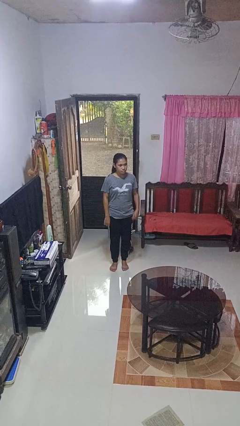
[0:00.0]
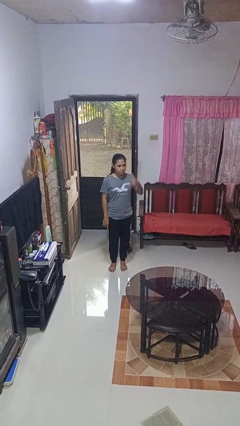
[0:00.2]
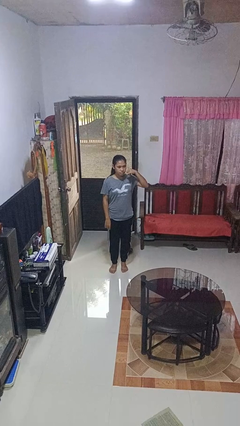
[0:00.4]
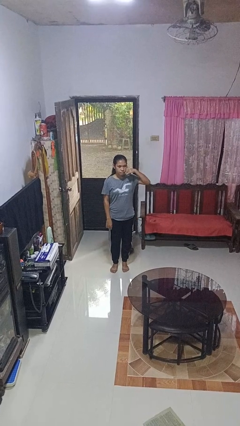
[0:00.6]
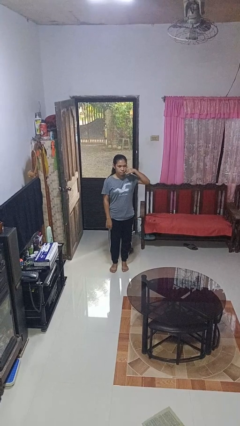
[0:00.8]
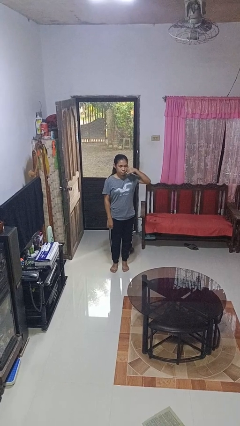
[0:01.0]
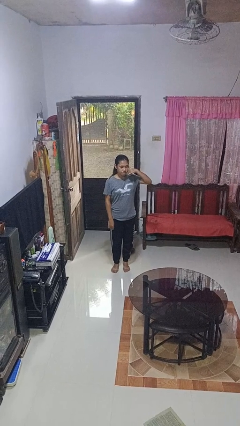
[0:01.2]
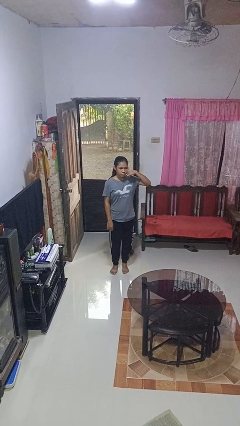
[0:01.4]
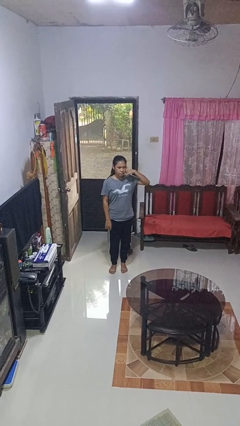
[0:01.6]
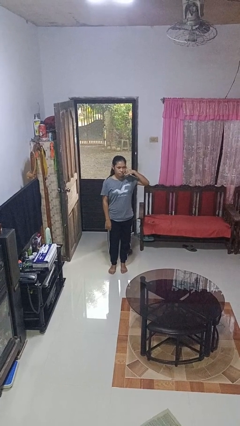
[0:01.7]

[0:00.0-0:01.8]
person gestures call me

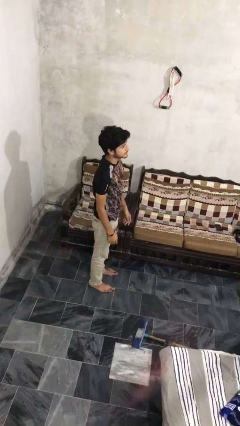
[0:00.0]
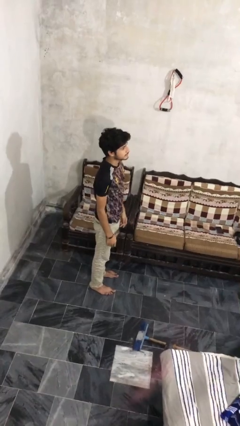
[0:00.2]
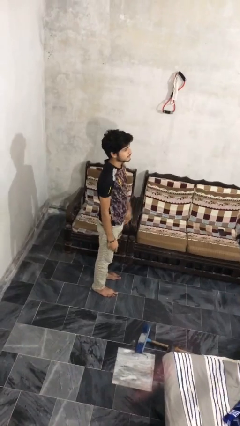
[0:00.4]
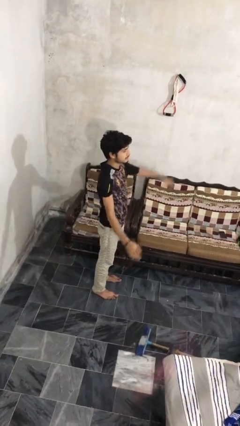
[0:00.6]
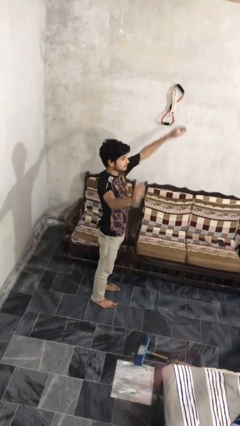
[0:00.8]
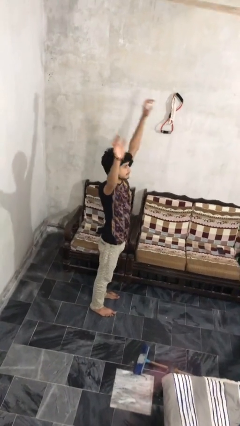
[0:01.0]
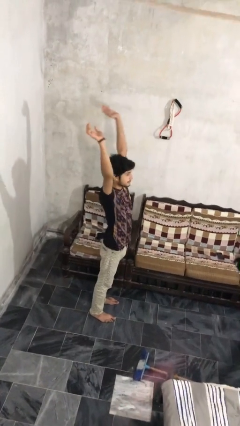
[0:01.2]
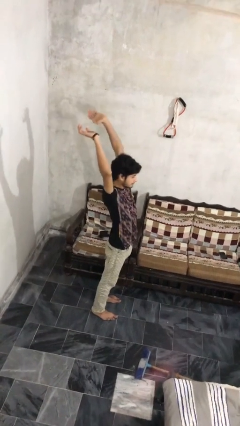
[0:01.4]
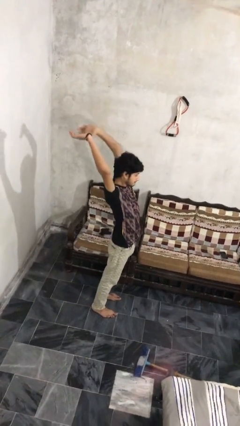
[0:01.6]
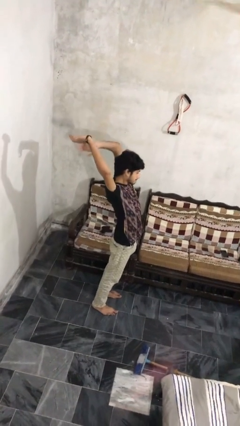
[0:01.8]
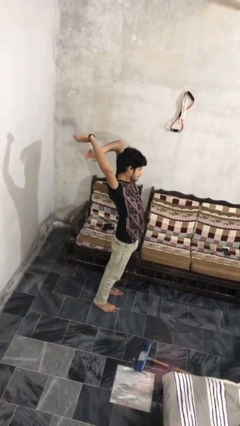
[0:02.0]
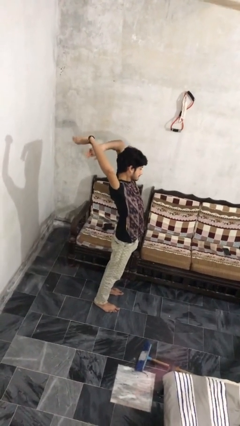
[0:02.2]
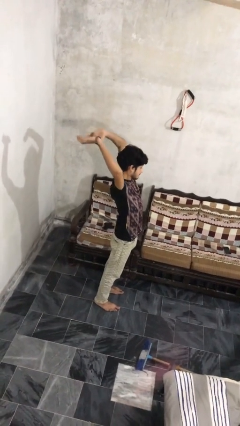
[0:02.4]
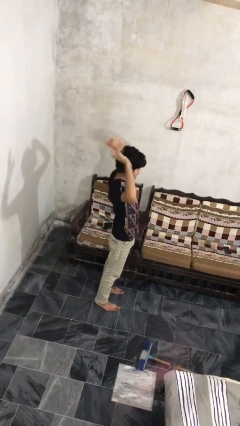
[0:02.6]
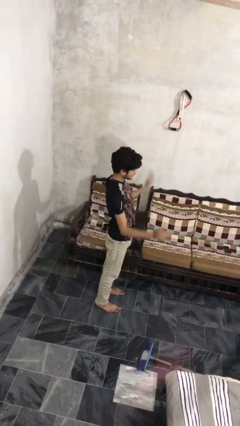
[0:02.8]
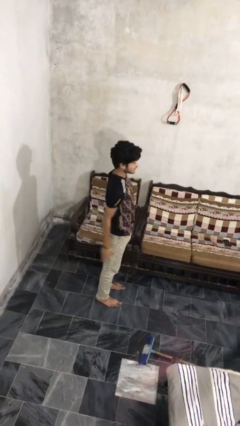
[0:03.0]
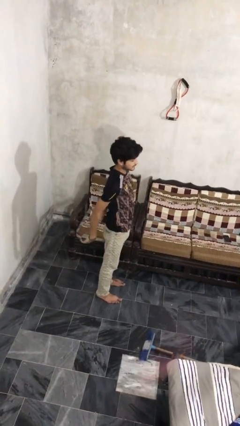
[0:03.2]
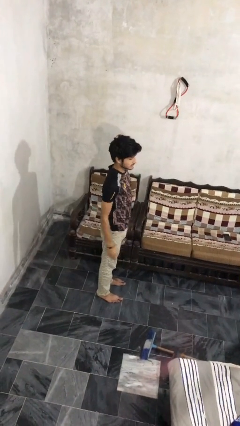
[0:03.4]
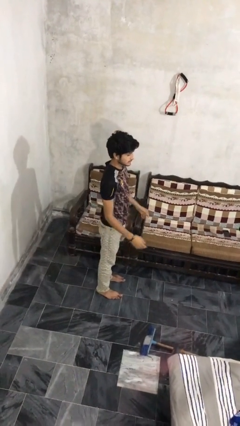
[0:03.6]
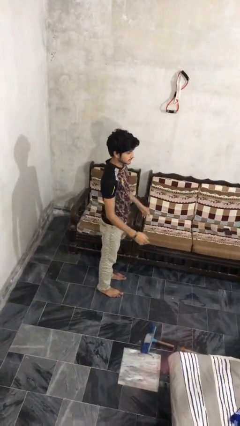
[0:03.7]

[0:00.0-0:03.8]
person stretches arms over head

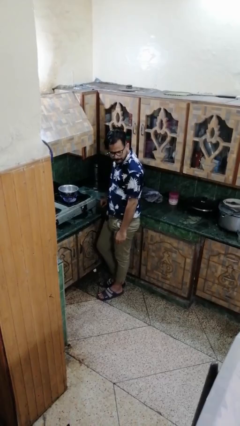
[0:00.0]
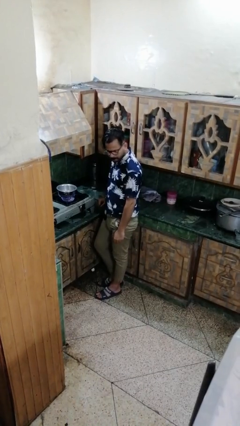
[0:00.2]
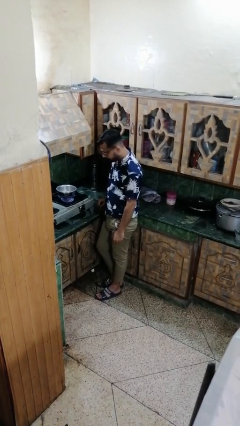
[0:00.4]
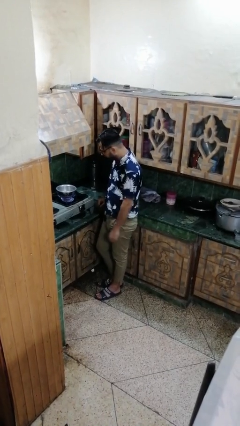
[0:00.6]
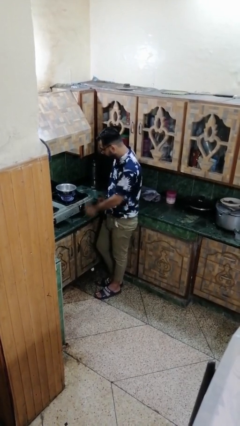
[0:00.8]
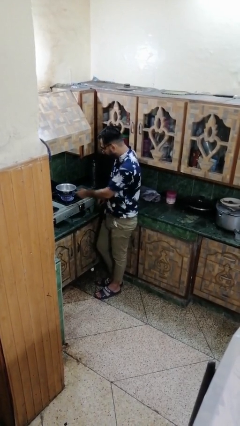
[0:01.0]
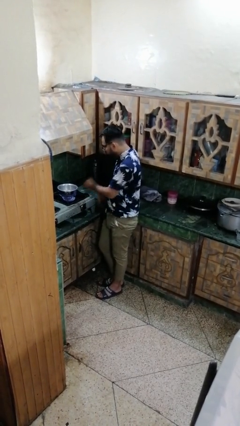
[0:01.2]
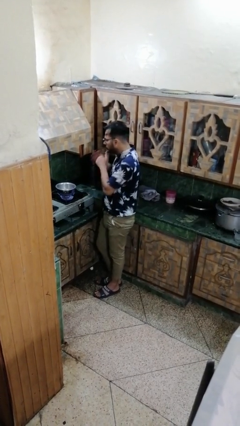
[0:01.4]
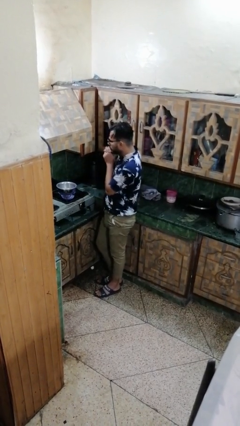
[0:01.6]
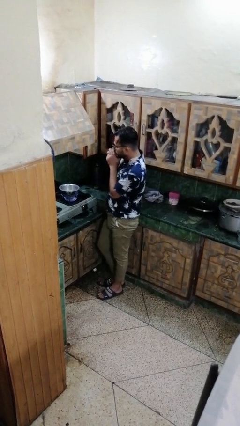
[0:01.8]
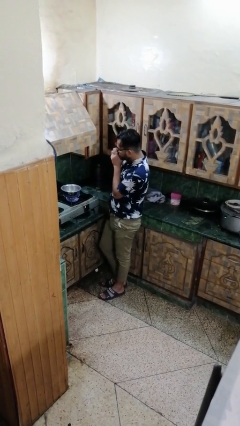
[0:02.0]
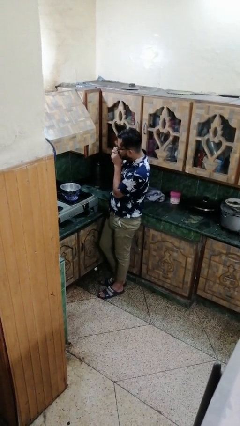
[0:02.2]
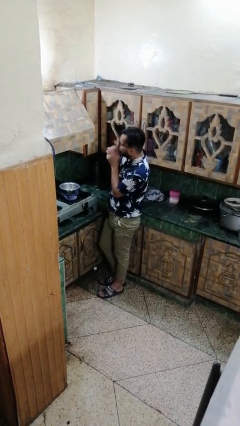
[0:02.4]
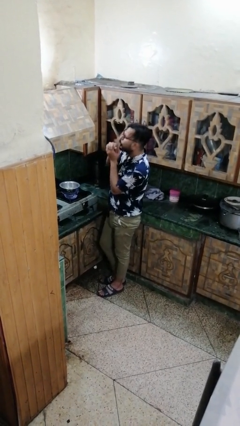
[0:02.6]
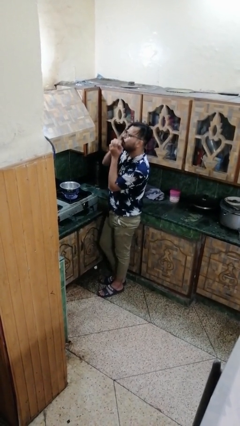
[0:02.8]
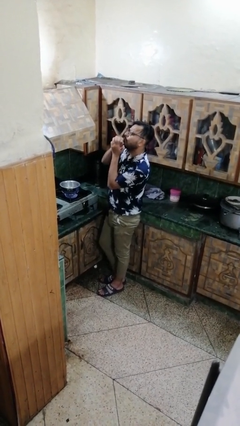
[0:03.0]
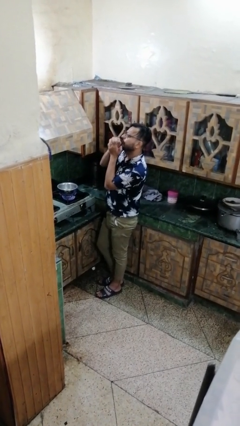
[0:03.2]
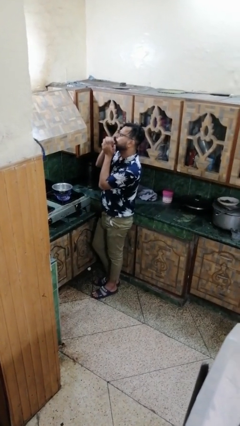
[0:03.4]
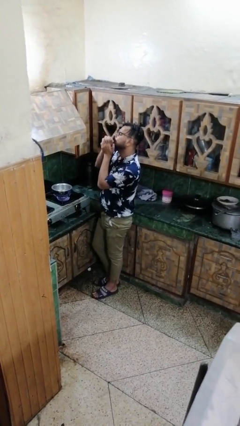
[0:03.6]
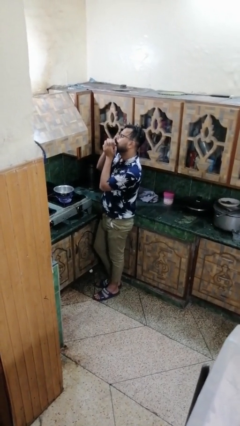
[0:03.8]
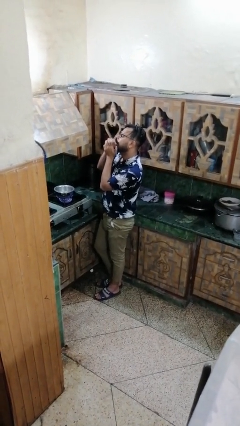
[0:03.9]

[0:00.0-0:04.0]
person burns hand

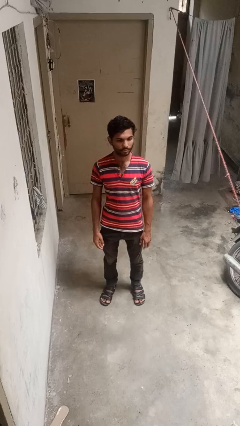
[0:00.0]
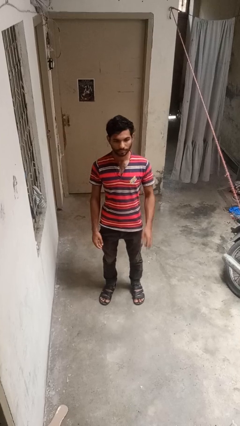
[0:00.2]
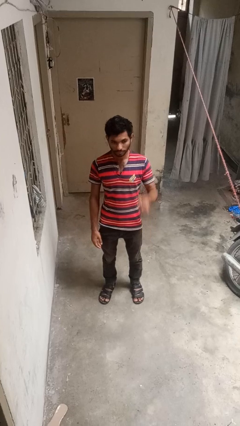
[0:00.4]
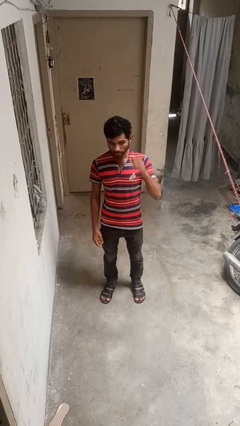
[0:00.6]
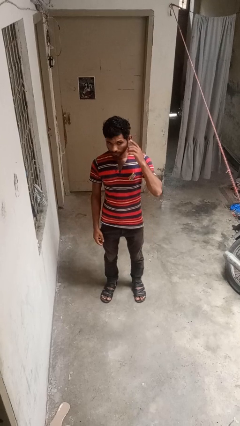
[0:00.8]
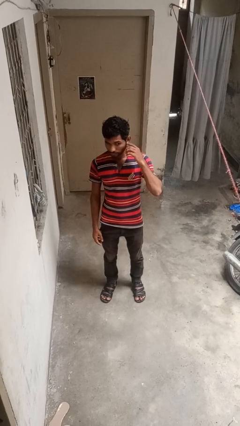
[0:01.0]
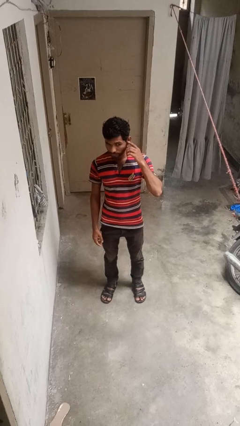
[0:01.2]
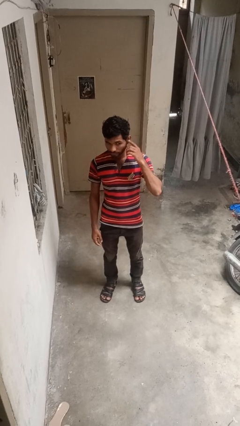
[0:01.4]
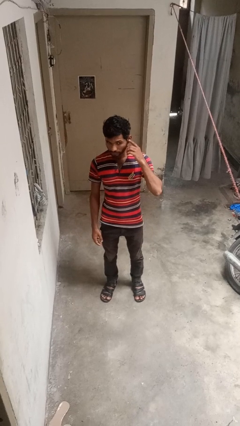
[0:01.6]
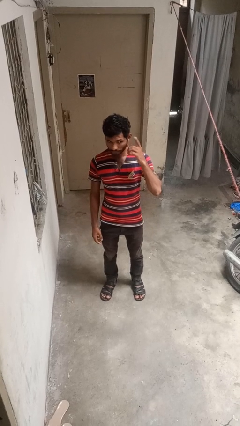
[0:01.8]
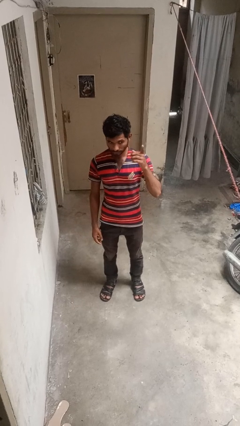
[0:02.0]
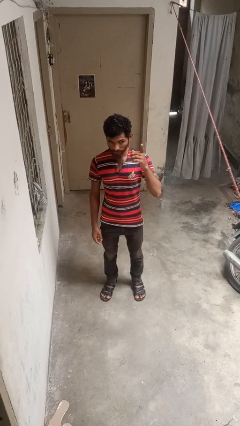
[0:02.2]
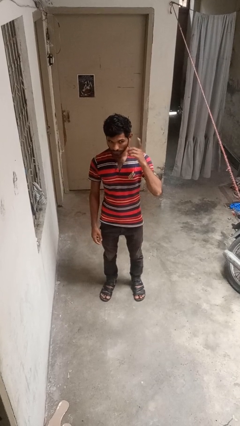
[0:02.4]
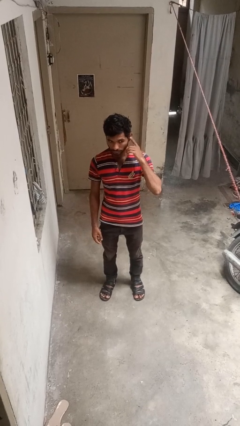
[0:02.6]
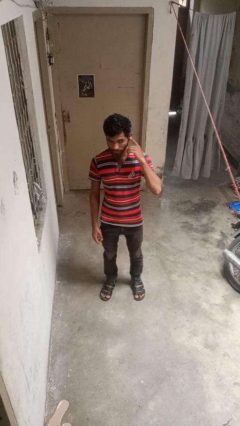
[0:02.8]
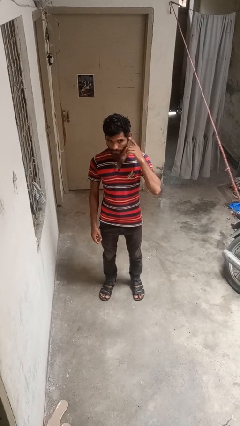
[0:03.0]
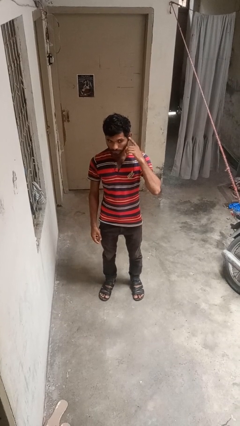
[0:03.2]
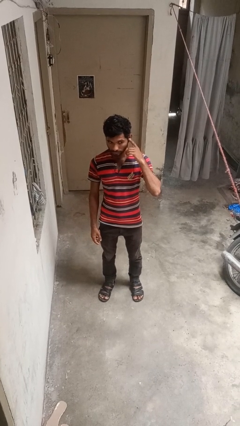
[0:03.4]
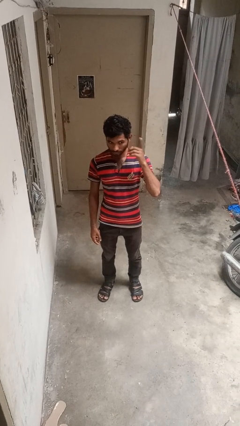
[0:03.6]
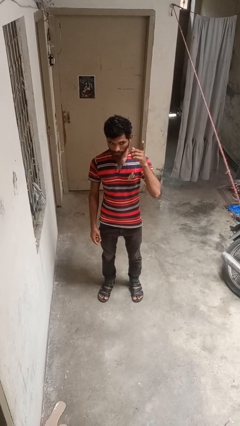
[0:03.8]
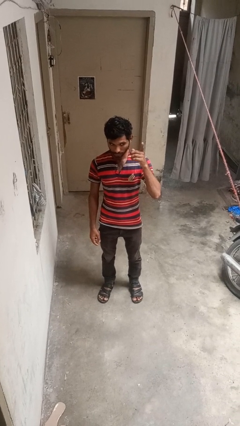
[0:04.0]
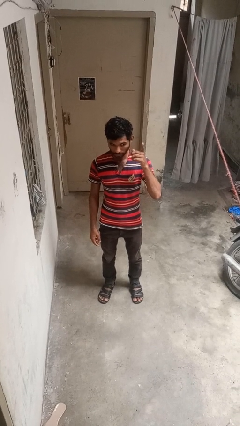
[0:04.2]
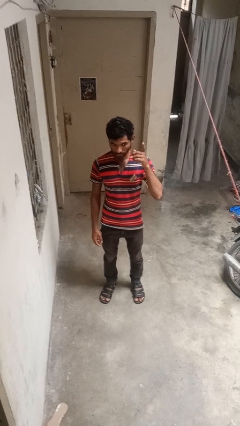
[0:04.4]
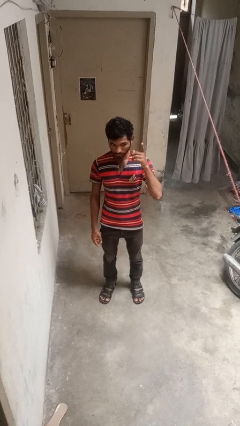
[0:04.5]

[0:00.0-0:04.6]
person gestures listen closely

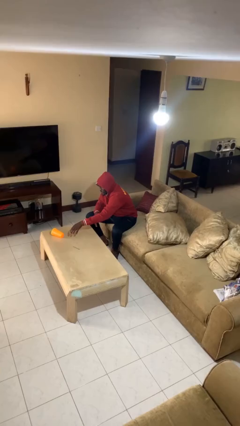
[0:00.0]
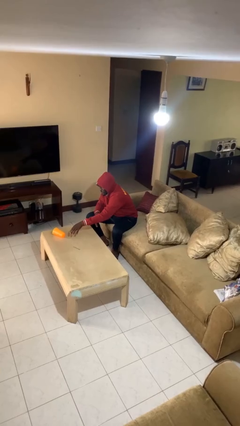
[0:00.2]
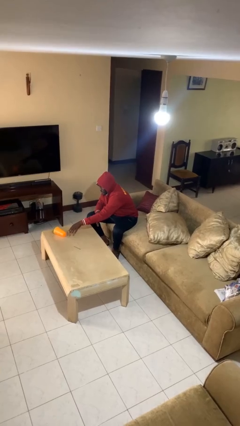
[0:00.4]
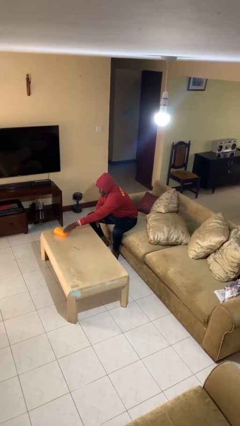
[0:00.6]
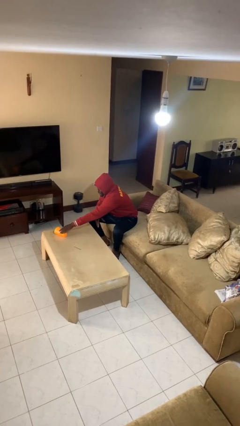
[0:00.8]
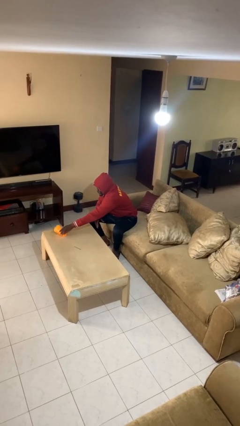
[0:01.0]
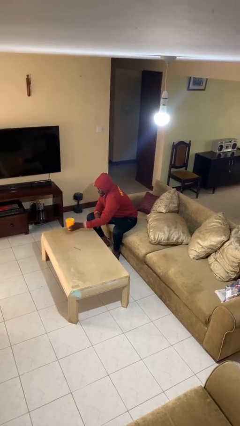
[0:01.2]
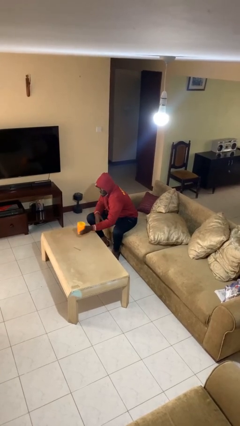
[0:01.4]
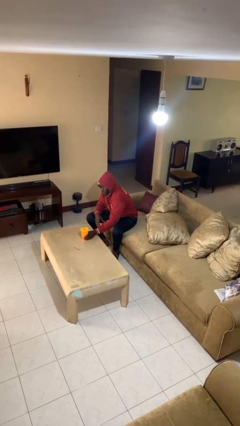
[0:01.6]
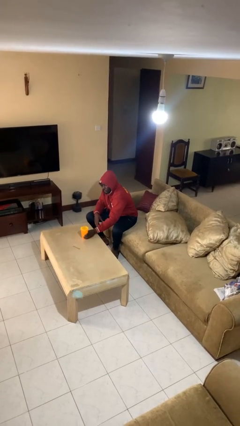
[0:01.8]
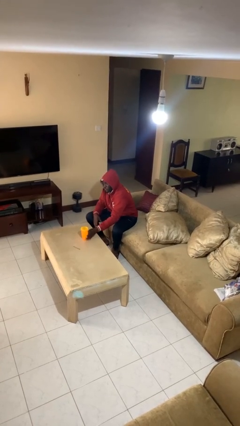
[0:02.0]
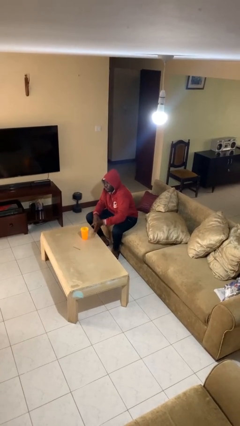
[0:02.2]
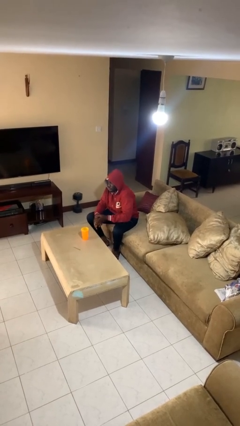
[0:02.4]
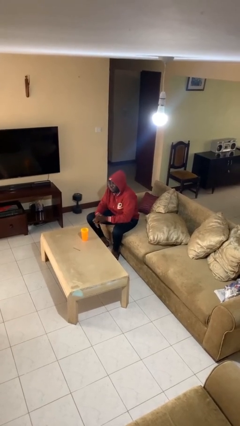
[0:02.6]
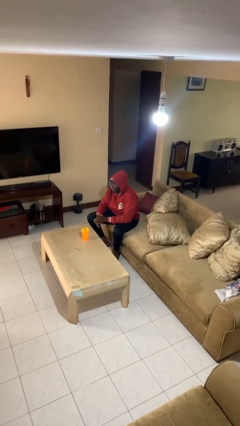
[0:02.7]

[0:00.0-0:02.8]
person sets upright glass

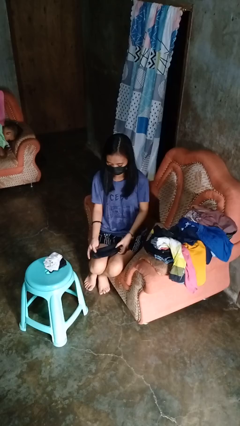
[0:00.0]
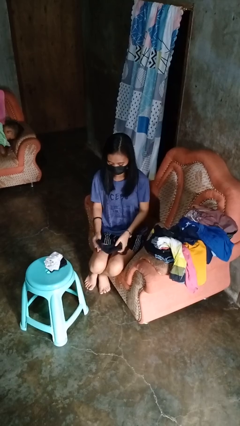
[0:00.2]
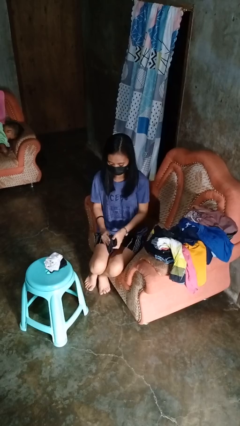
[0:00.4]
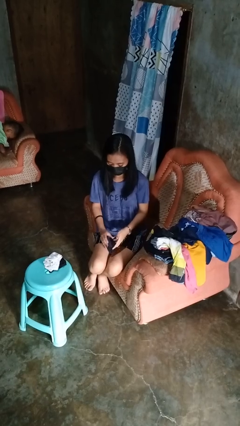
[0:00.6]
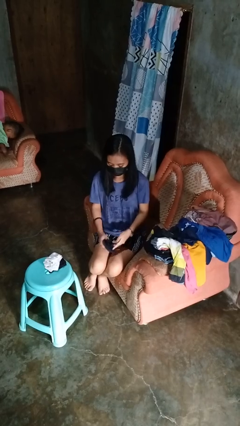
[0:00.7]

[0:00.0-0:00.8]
person folds socks
